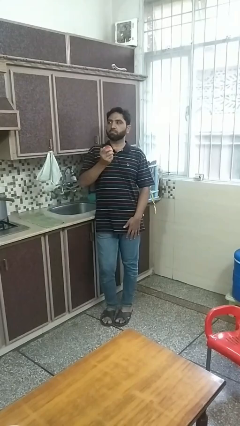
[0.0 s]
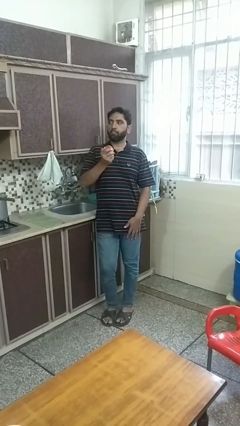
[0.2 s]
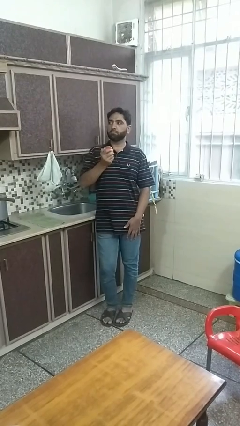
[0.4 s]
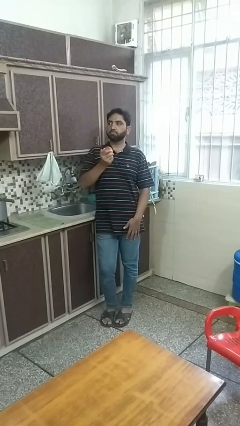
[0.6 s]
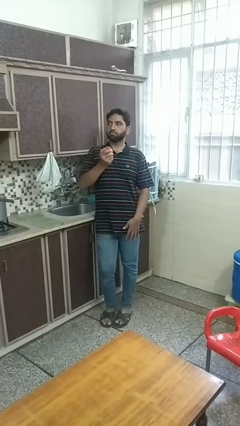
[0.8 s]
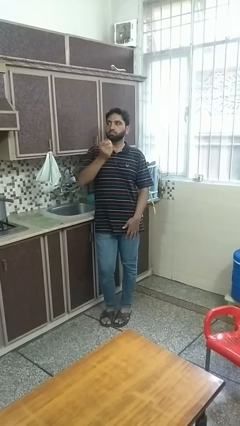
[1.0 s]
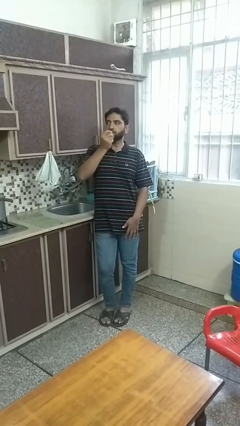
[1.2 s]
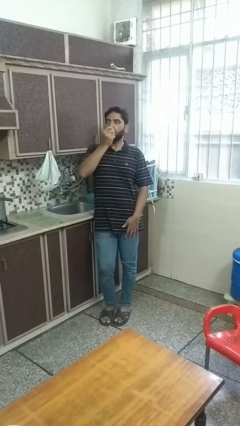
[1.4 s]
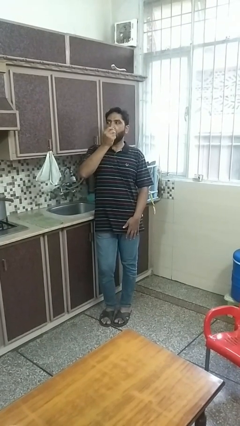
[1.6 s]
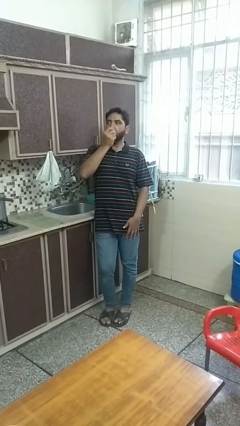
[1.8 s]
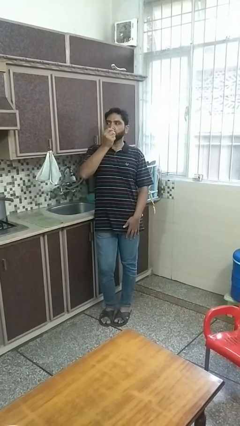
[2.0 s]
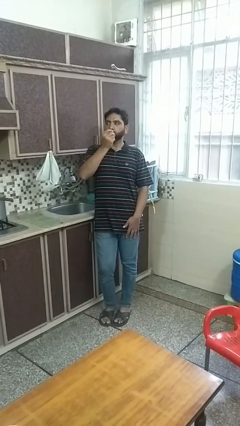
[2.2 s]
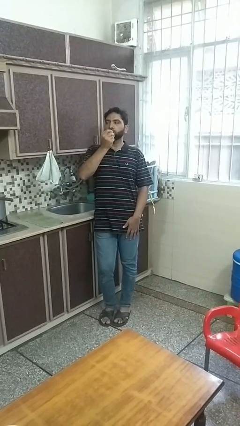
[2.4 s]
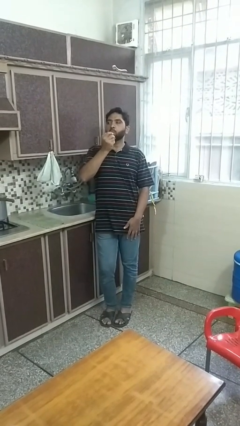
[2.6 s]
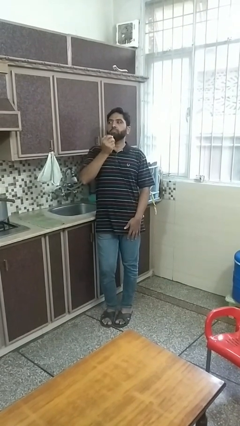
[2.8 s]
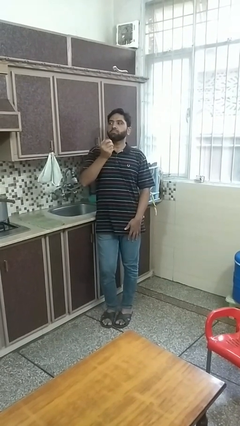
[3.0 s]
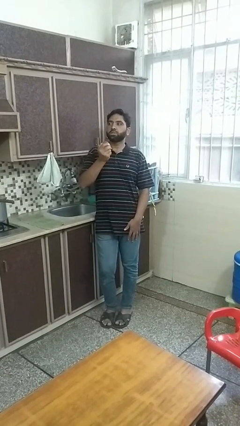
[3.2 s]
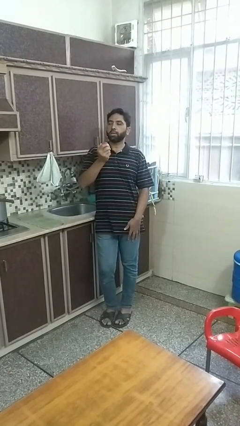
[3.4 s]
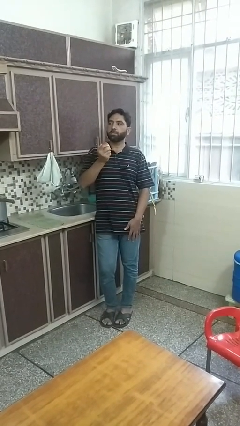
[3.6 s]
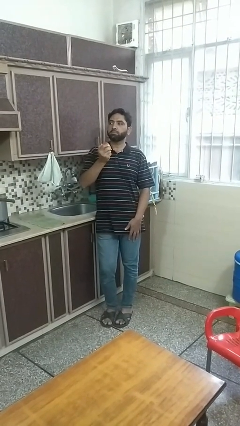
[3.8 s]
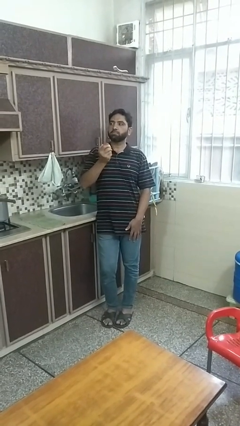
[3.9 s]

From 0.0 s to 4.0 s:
person eats apple

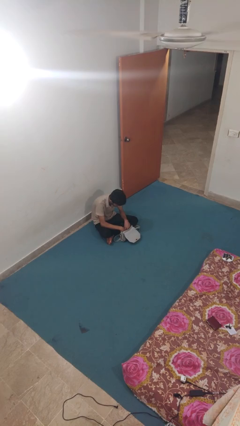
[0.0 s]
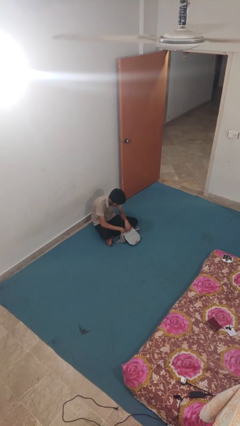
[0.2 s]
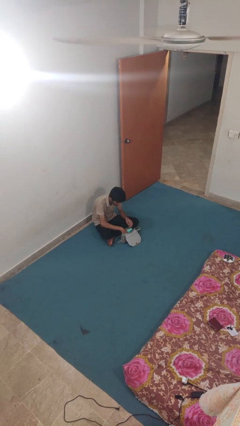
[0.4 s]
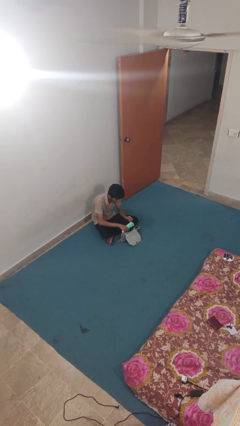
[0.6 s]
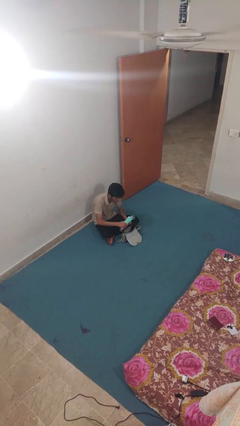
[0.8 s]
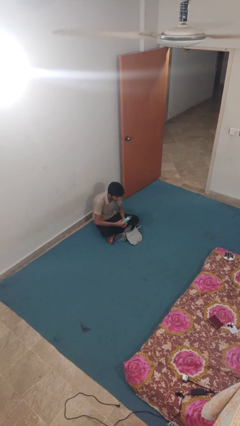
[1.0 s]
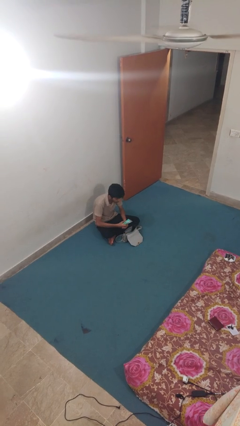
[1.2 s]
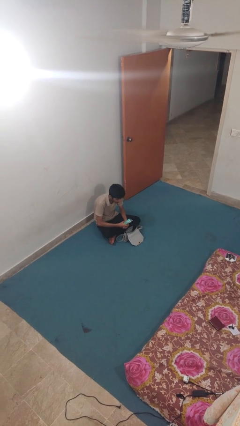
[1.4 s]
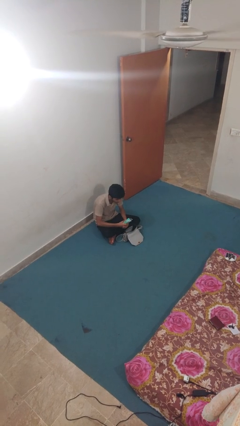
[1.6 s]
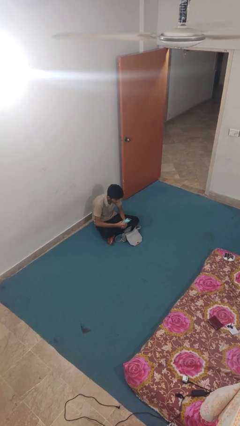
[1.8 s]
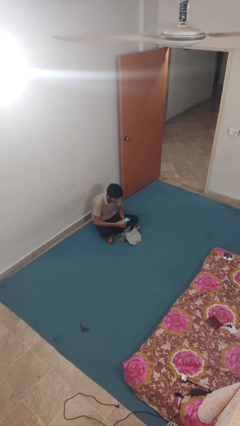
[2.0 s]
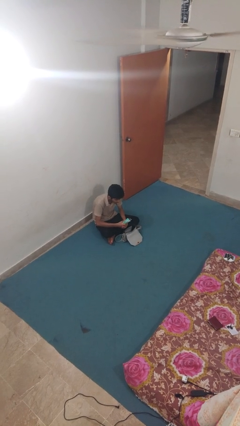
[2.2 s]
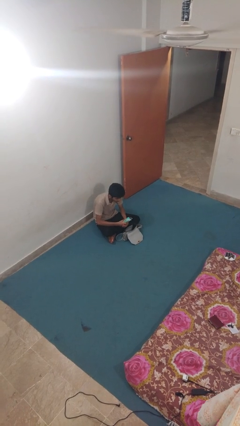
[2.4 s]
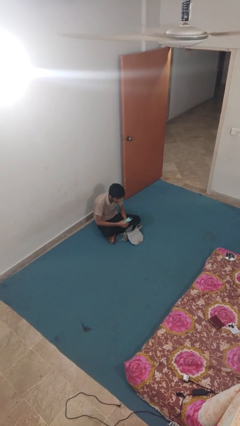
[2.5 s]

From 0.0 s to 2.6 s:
person takes object from purse

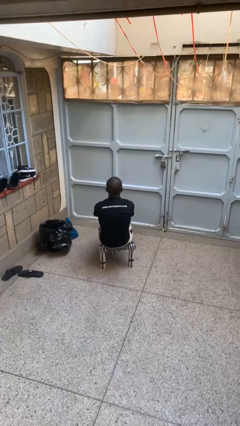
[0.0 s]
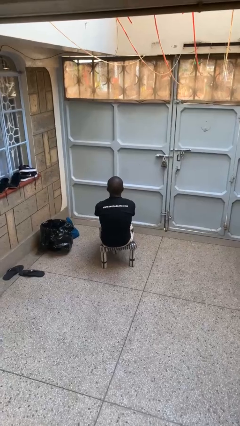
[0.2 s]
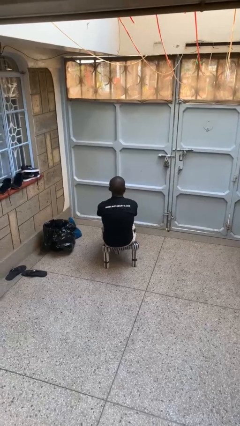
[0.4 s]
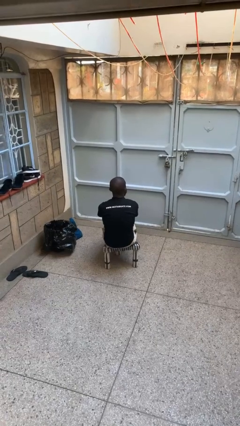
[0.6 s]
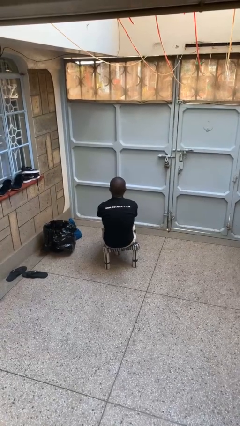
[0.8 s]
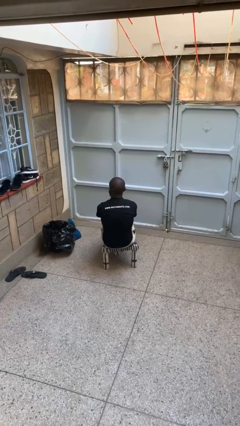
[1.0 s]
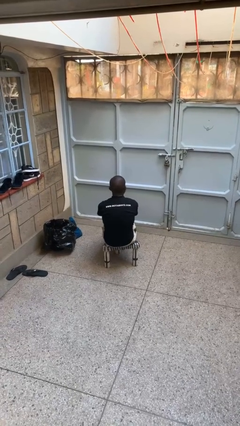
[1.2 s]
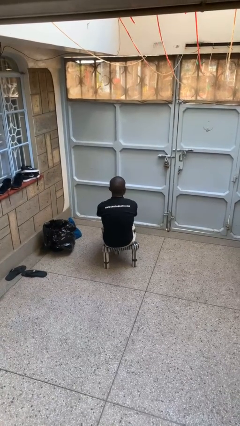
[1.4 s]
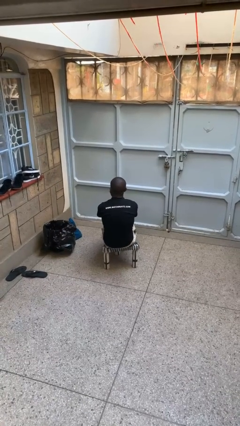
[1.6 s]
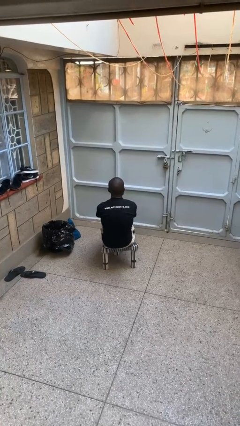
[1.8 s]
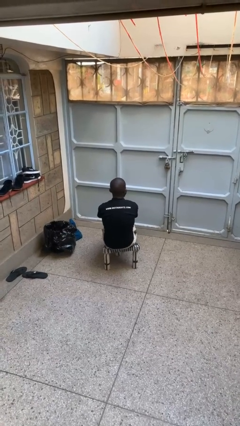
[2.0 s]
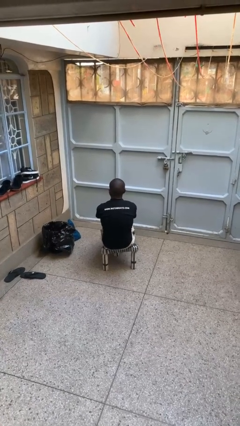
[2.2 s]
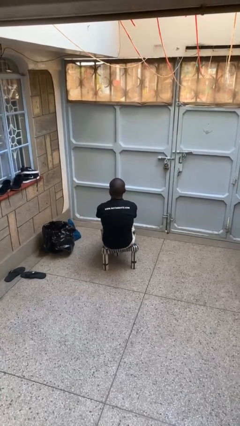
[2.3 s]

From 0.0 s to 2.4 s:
person shakes head

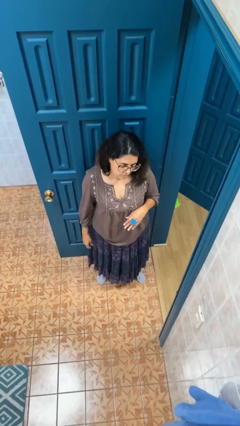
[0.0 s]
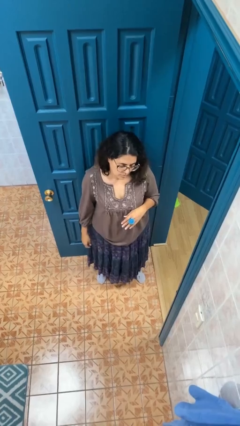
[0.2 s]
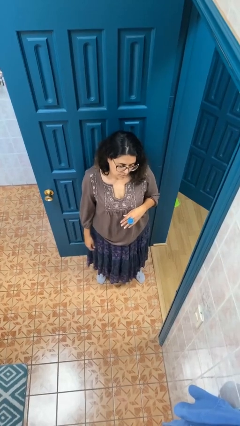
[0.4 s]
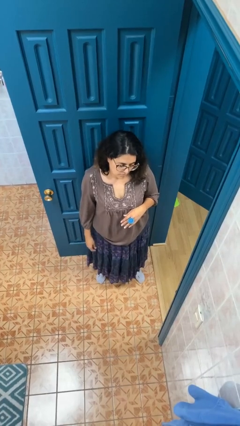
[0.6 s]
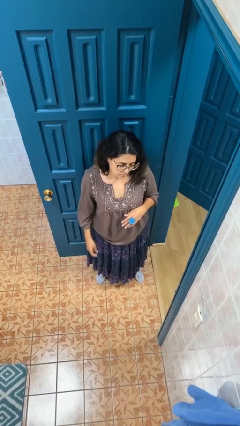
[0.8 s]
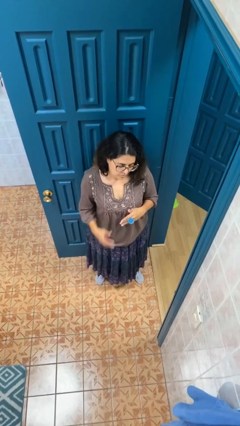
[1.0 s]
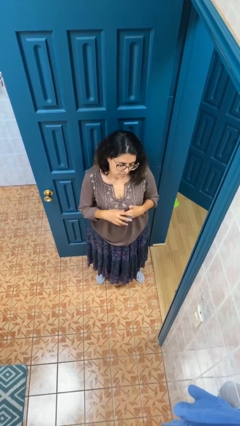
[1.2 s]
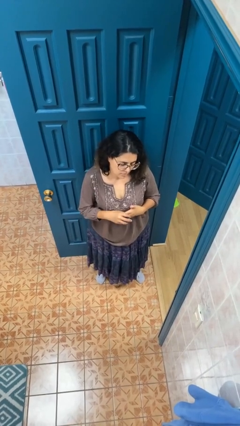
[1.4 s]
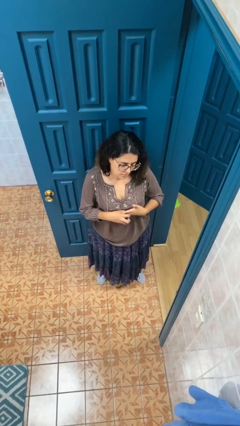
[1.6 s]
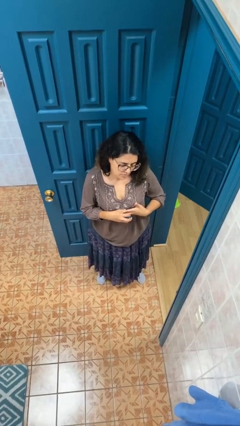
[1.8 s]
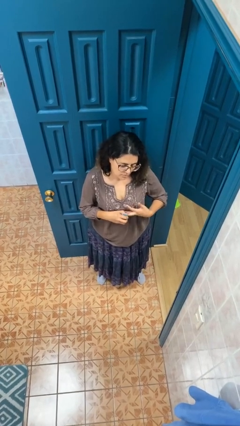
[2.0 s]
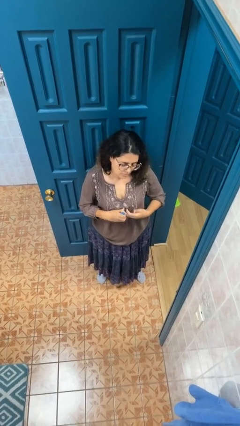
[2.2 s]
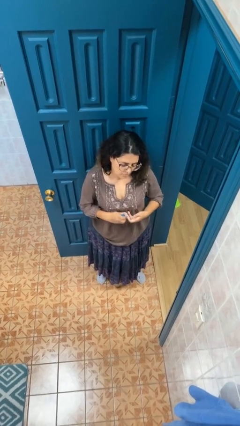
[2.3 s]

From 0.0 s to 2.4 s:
person takes off ring

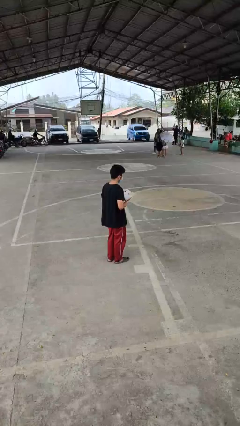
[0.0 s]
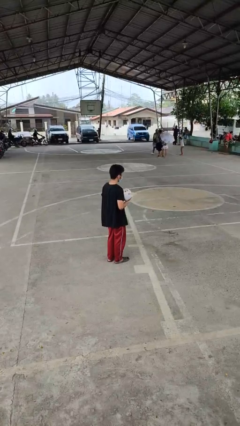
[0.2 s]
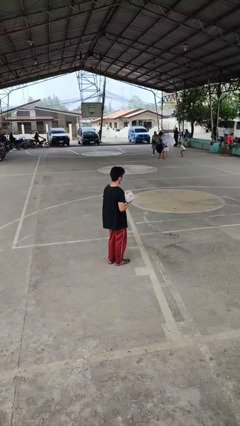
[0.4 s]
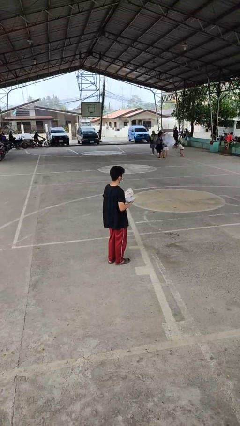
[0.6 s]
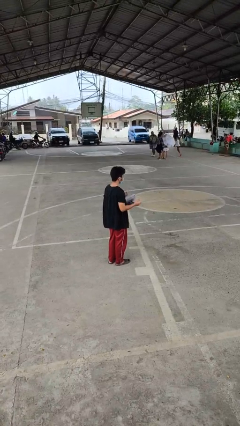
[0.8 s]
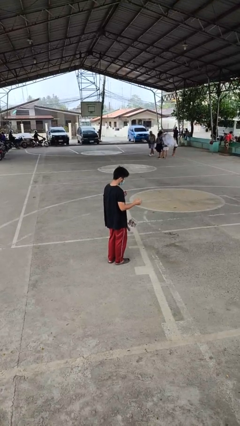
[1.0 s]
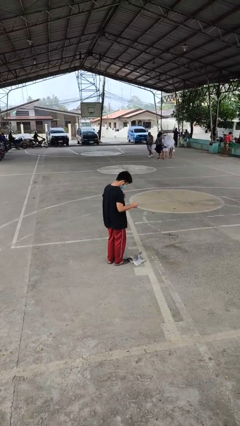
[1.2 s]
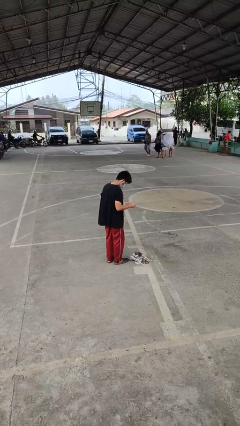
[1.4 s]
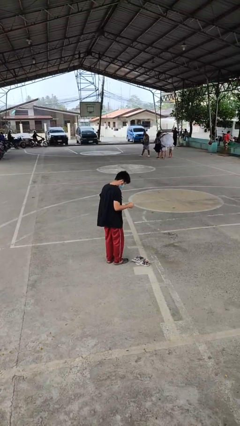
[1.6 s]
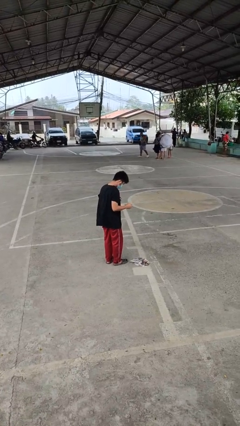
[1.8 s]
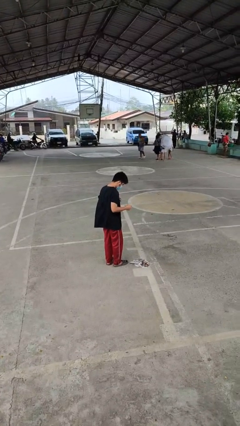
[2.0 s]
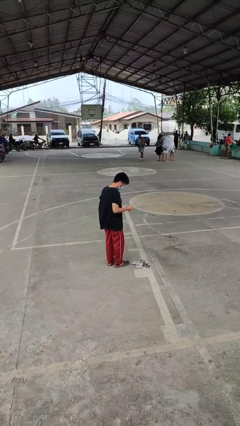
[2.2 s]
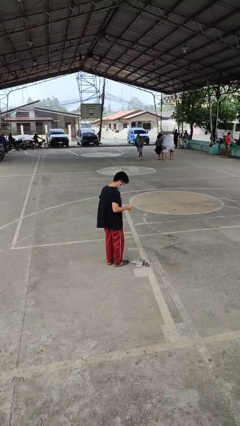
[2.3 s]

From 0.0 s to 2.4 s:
person drops object

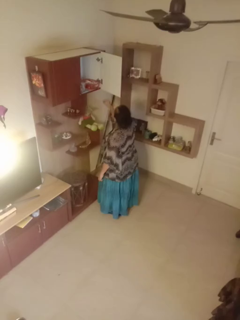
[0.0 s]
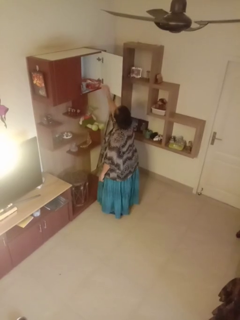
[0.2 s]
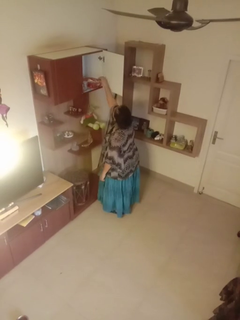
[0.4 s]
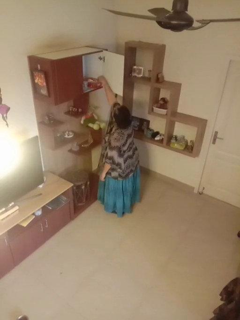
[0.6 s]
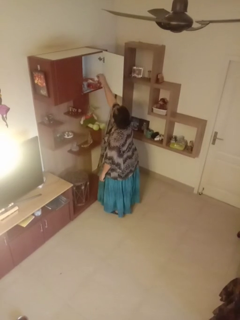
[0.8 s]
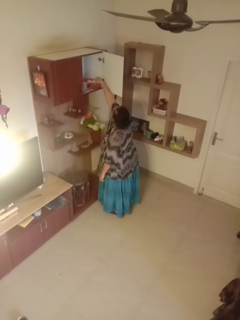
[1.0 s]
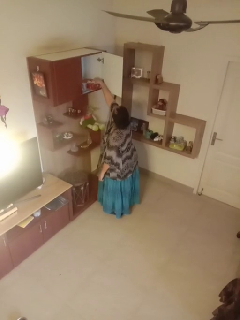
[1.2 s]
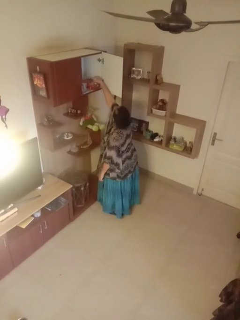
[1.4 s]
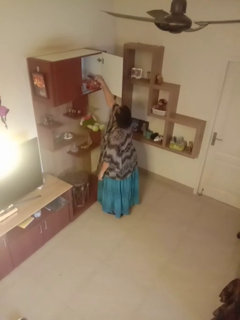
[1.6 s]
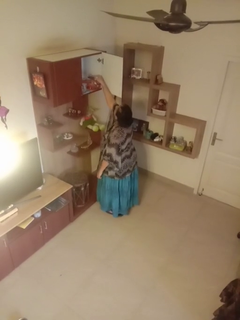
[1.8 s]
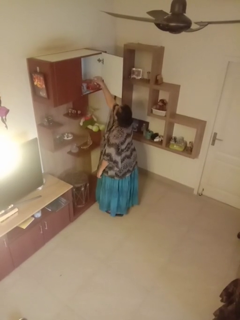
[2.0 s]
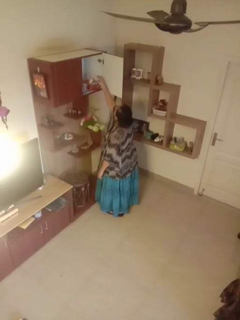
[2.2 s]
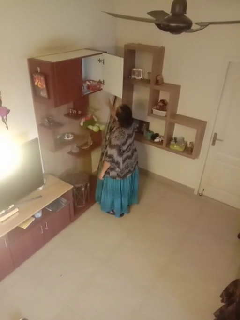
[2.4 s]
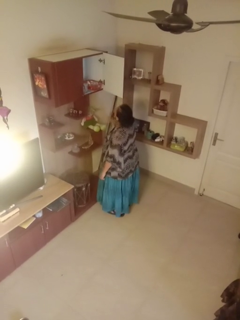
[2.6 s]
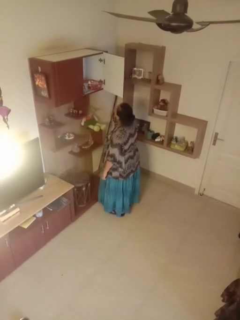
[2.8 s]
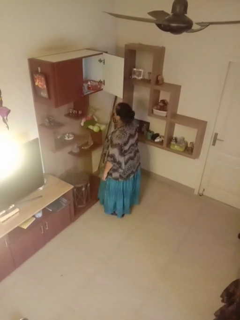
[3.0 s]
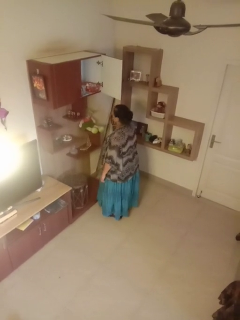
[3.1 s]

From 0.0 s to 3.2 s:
person searches in cabinet

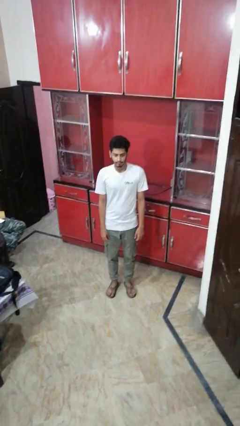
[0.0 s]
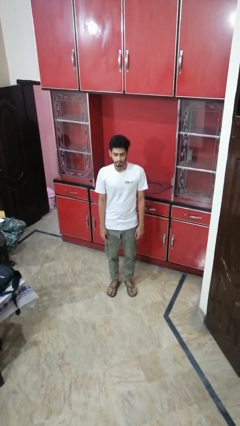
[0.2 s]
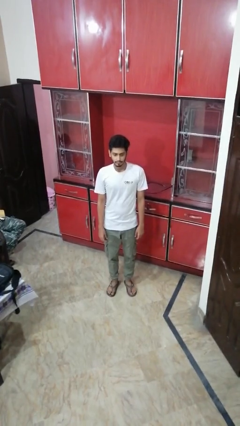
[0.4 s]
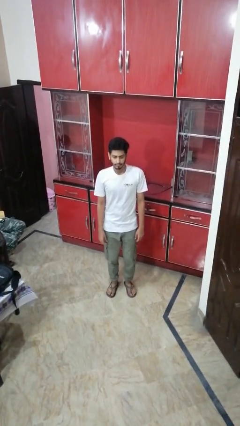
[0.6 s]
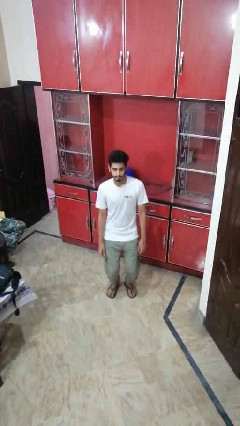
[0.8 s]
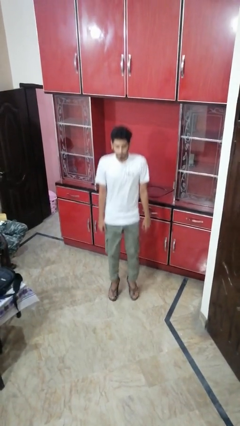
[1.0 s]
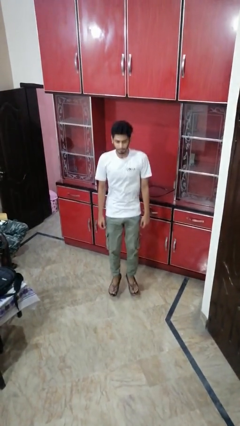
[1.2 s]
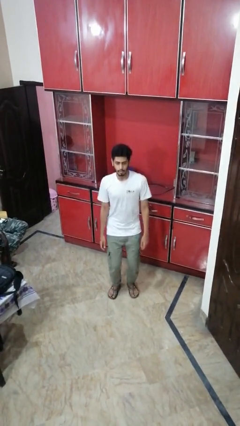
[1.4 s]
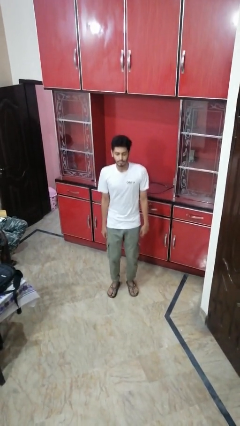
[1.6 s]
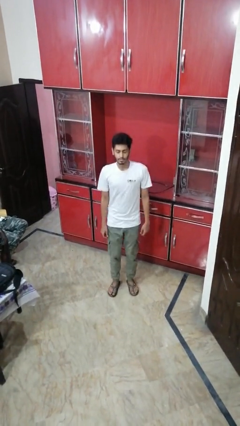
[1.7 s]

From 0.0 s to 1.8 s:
person jumps
